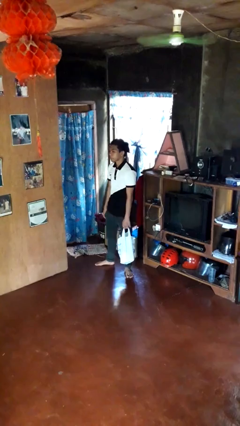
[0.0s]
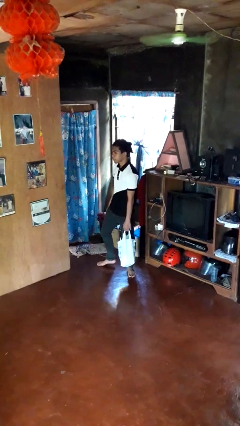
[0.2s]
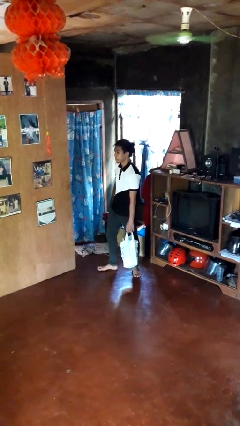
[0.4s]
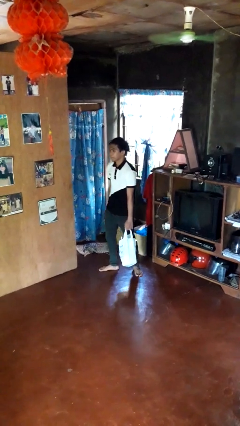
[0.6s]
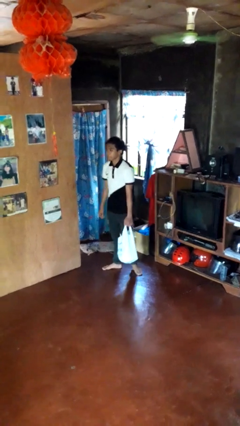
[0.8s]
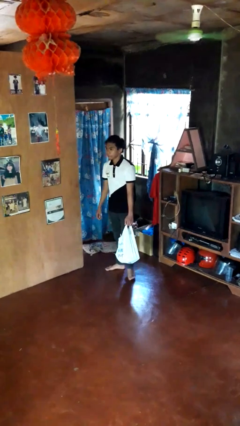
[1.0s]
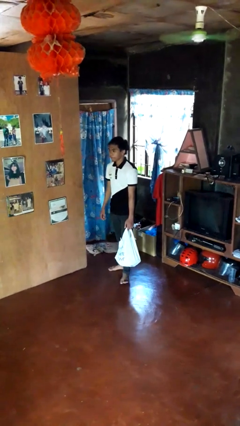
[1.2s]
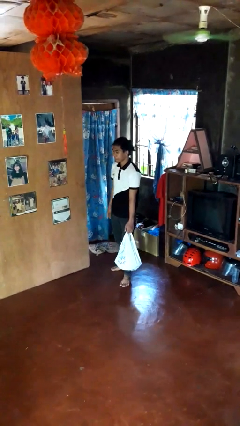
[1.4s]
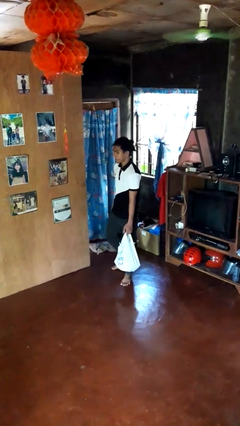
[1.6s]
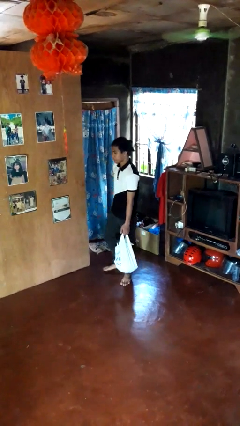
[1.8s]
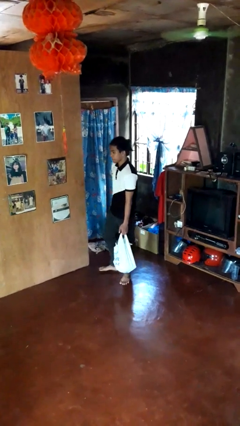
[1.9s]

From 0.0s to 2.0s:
person carries groceries

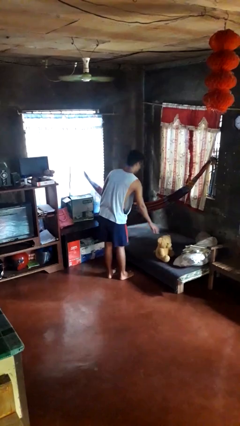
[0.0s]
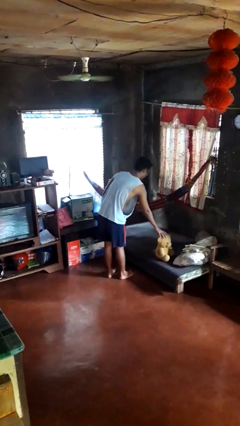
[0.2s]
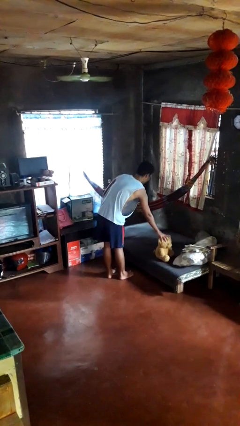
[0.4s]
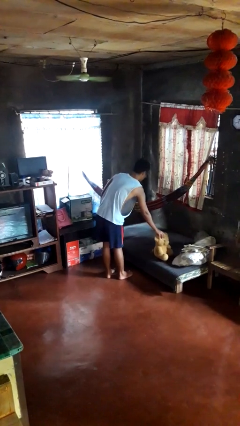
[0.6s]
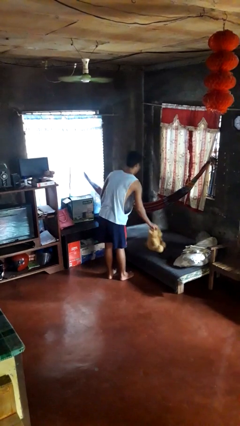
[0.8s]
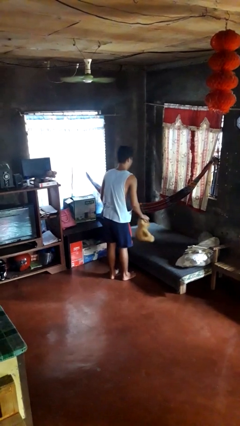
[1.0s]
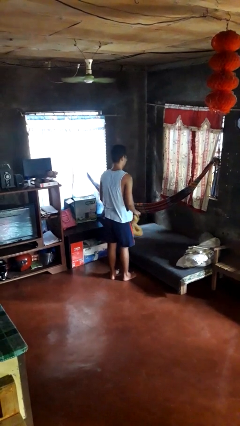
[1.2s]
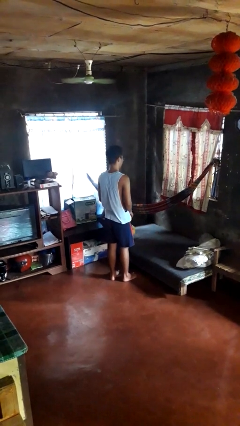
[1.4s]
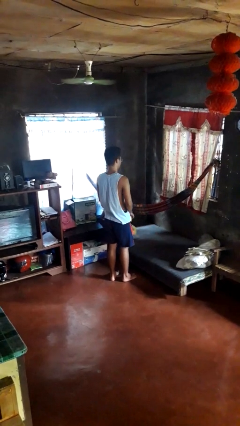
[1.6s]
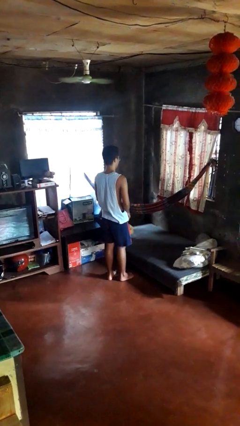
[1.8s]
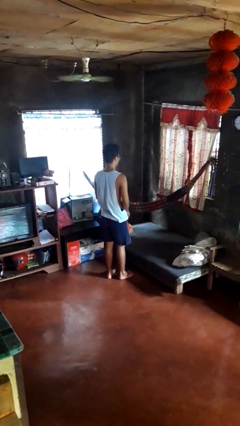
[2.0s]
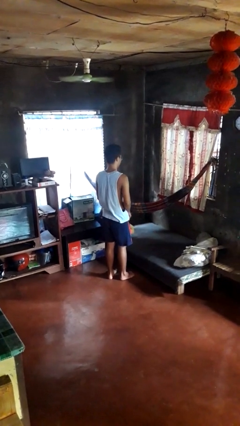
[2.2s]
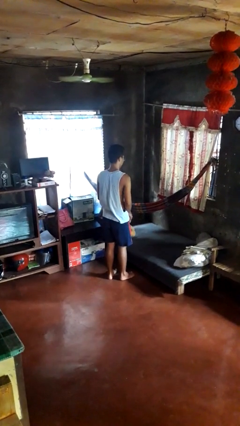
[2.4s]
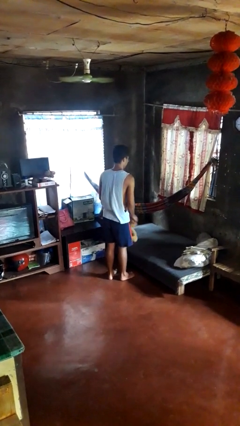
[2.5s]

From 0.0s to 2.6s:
person picks up object from bed

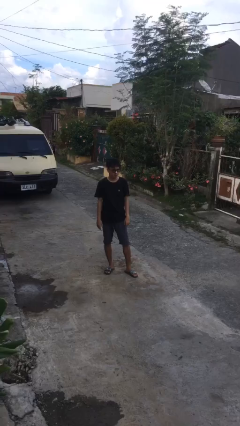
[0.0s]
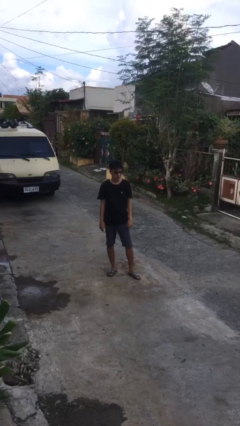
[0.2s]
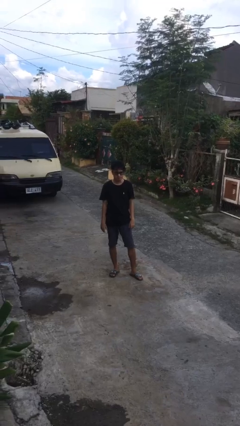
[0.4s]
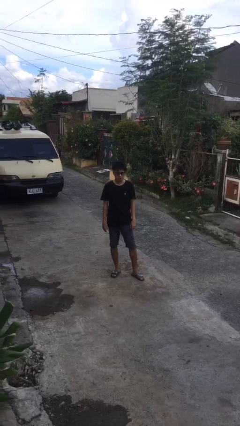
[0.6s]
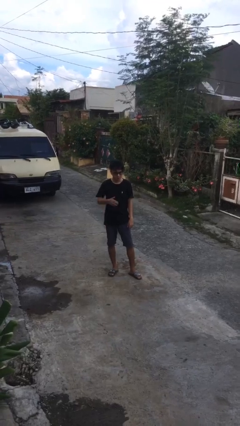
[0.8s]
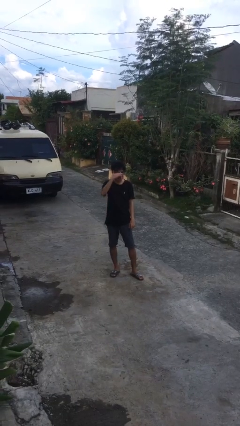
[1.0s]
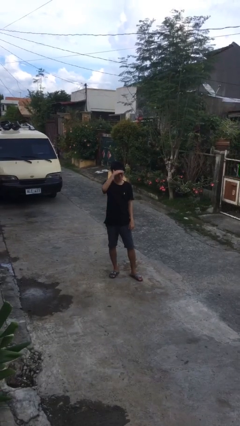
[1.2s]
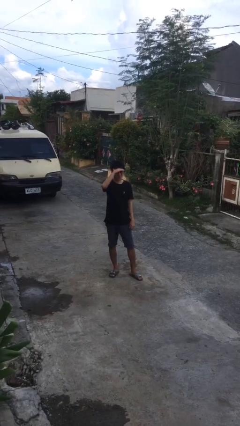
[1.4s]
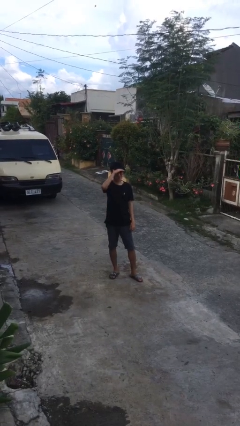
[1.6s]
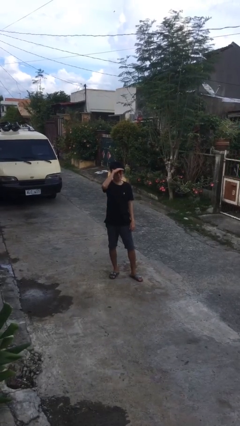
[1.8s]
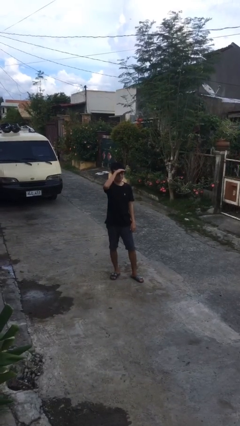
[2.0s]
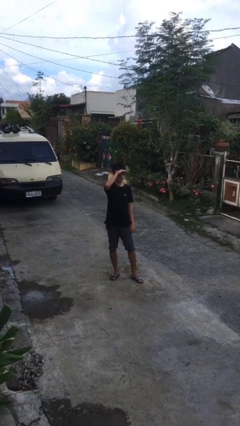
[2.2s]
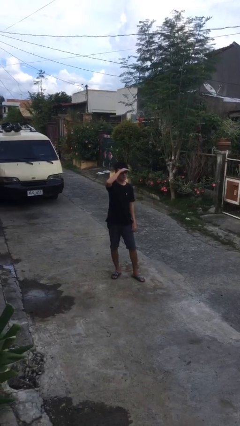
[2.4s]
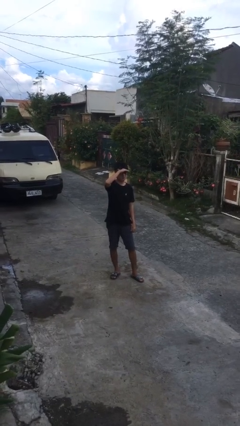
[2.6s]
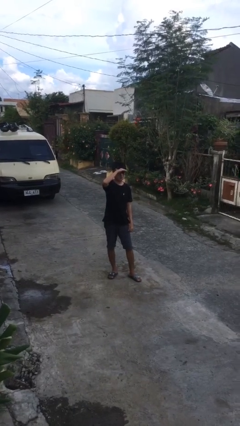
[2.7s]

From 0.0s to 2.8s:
person shades eyes

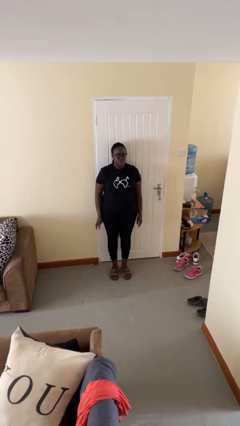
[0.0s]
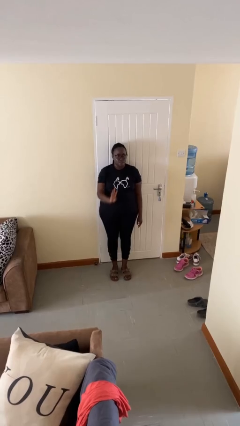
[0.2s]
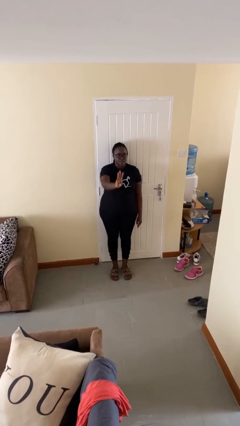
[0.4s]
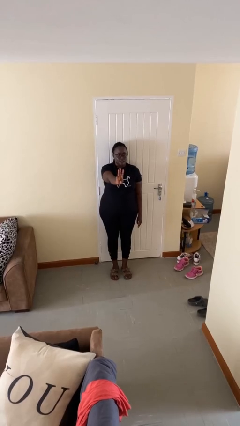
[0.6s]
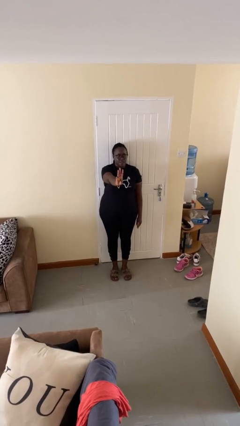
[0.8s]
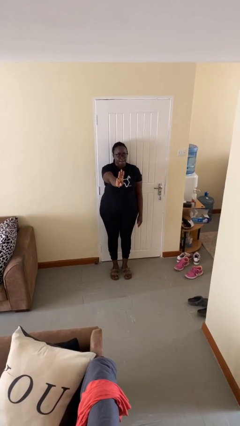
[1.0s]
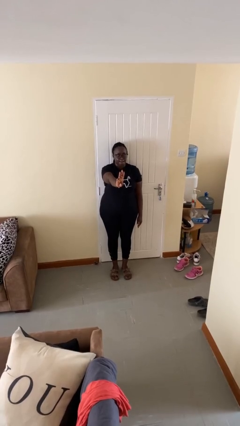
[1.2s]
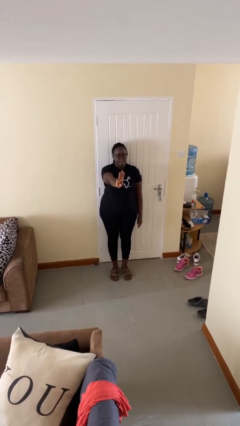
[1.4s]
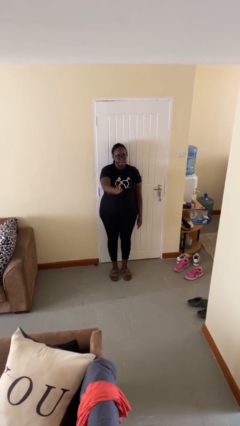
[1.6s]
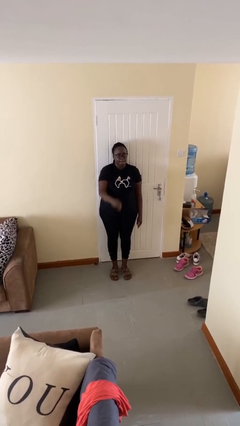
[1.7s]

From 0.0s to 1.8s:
person gestures number three

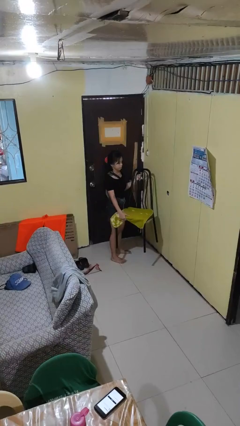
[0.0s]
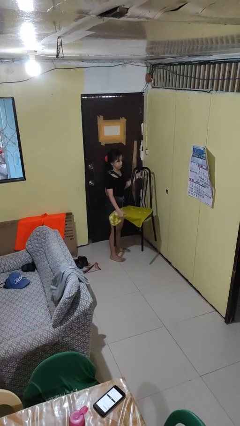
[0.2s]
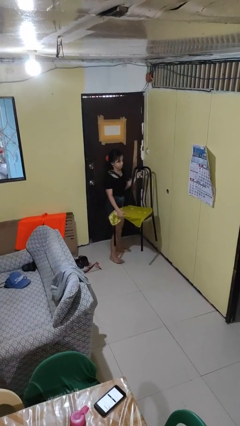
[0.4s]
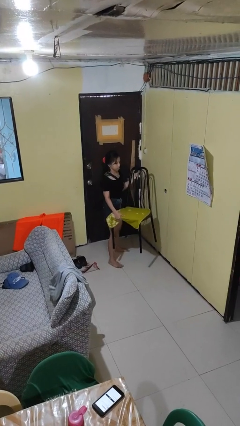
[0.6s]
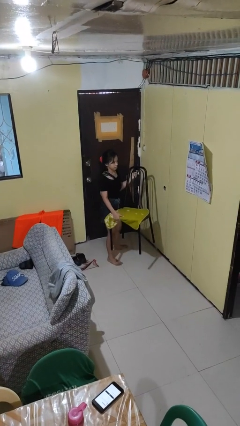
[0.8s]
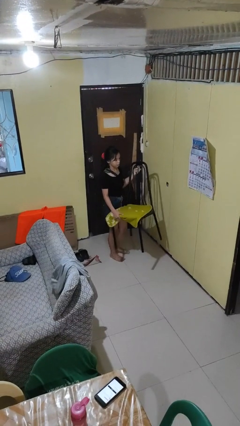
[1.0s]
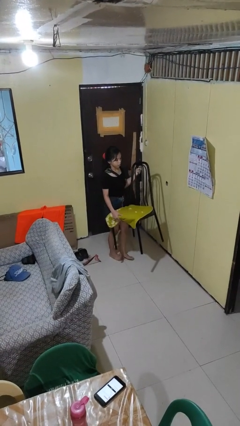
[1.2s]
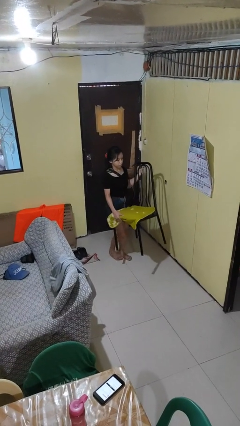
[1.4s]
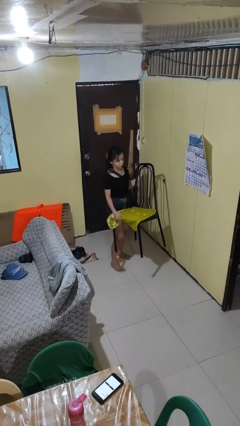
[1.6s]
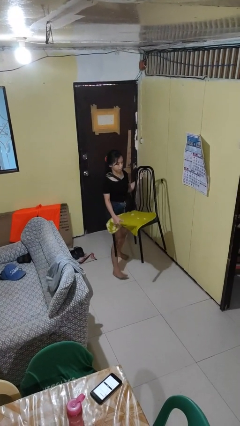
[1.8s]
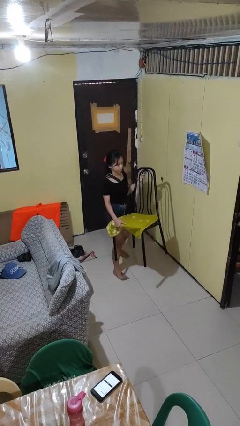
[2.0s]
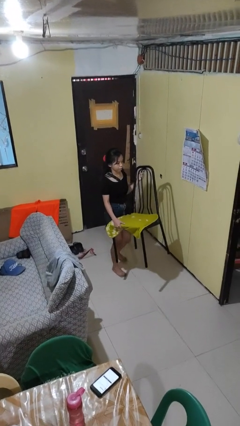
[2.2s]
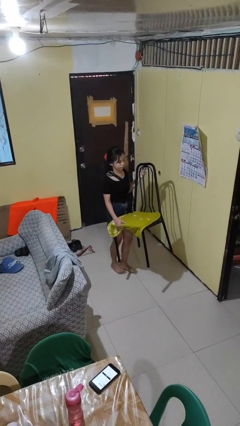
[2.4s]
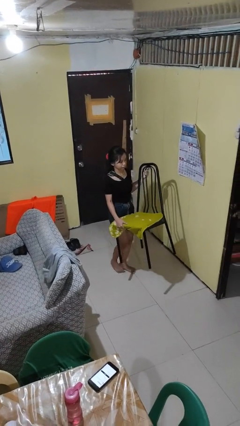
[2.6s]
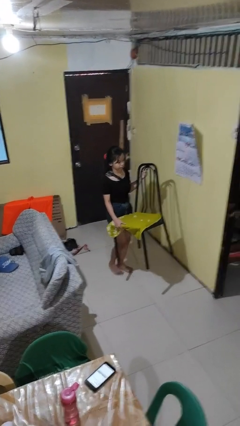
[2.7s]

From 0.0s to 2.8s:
person carries furniture

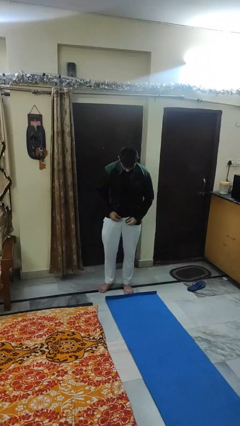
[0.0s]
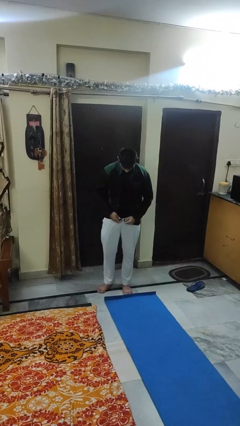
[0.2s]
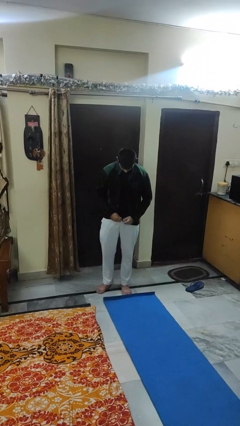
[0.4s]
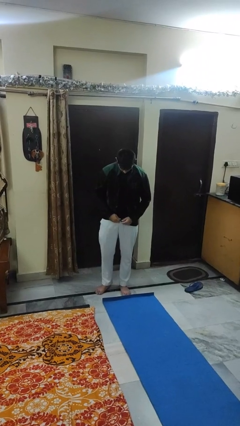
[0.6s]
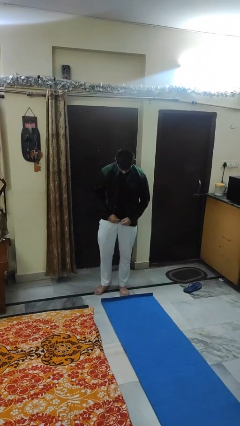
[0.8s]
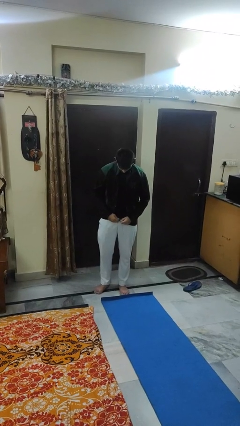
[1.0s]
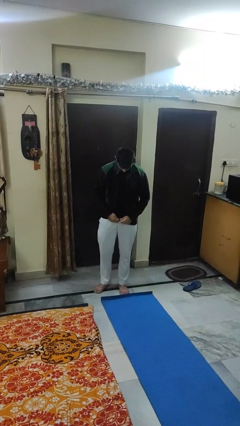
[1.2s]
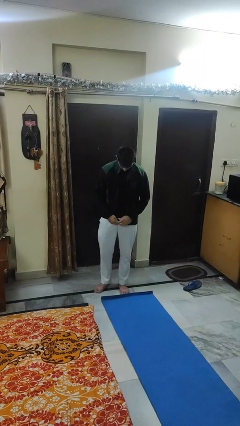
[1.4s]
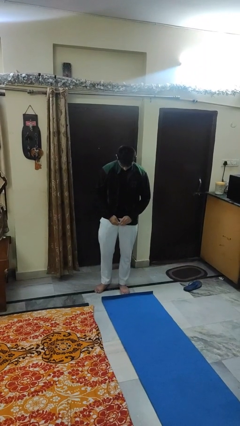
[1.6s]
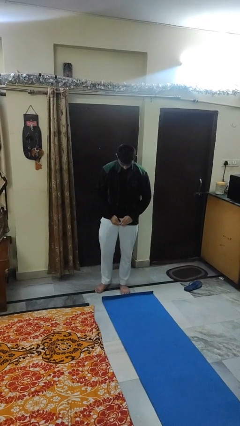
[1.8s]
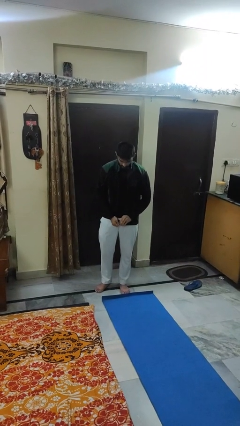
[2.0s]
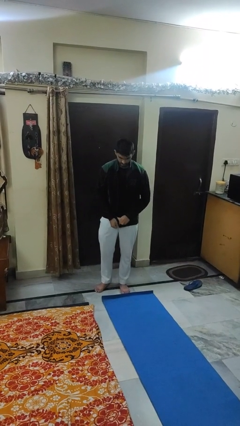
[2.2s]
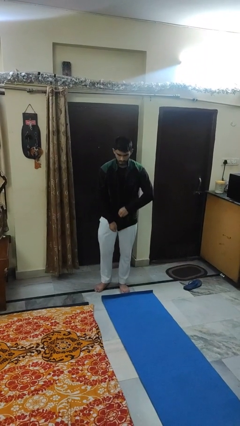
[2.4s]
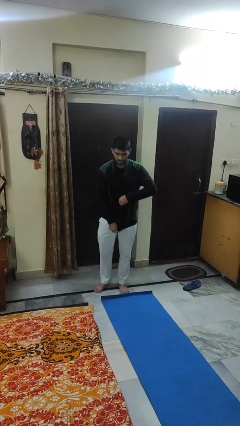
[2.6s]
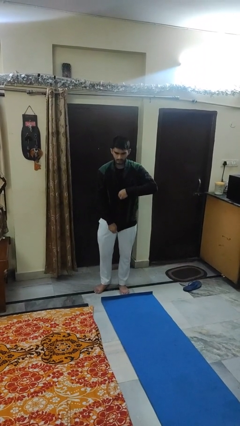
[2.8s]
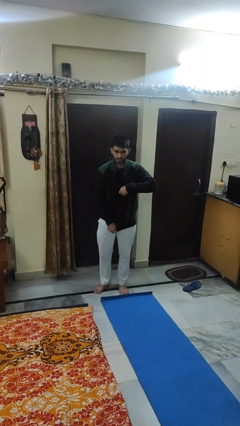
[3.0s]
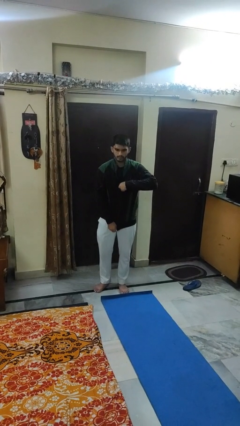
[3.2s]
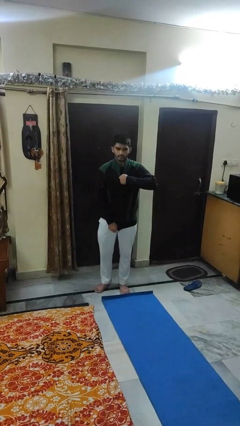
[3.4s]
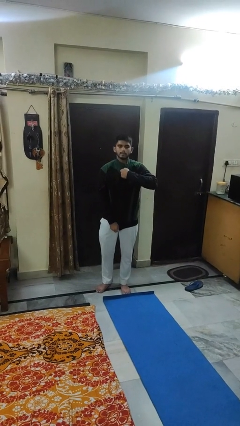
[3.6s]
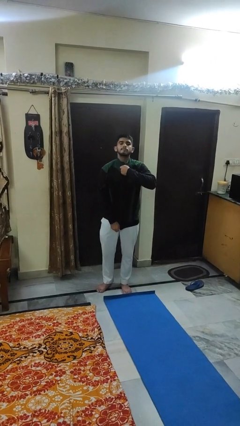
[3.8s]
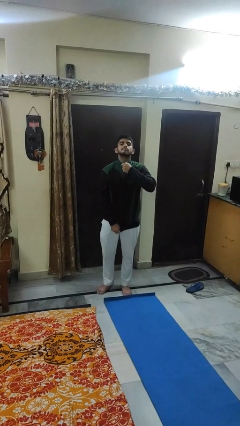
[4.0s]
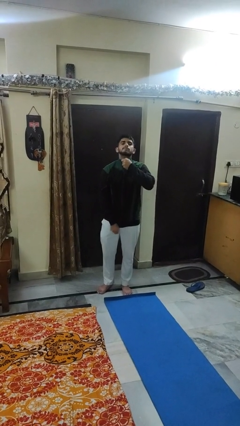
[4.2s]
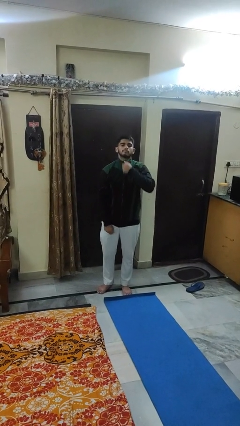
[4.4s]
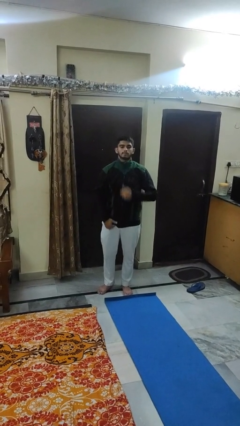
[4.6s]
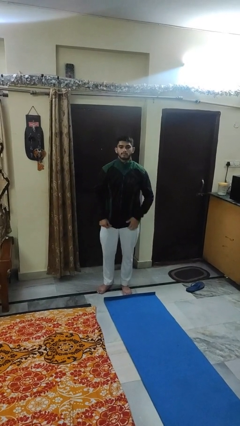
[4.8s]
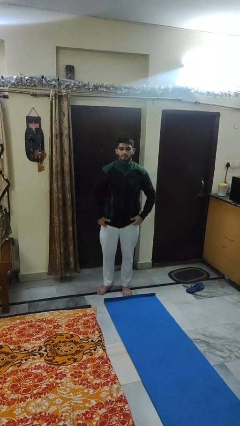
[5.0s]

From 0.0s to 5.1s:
person zips up jacket

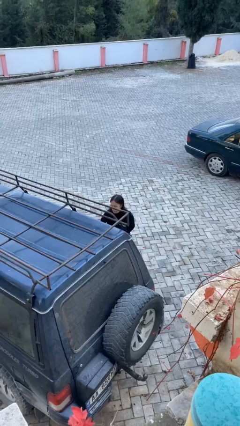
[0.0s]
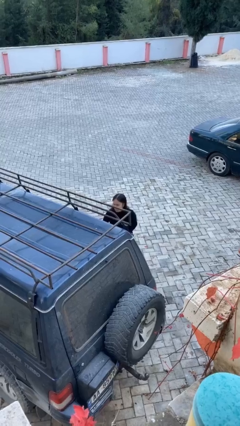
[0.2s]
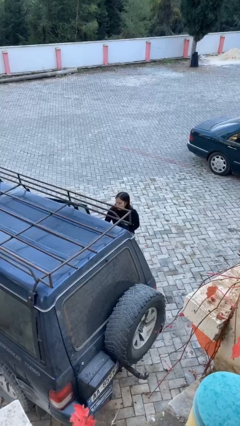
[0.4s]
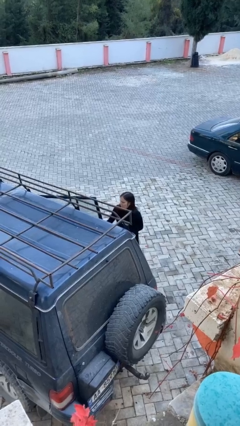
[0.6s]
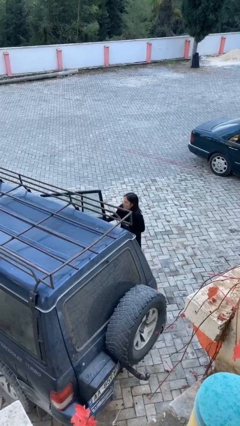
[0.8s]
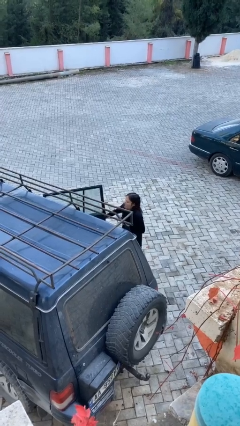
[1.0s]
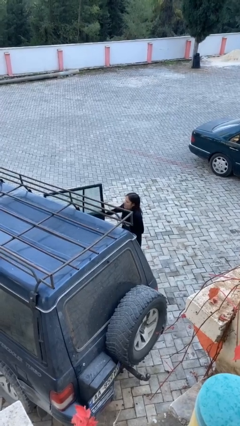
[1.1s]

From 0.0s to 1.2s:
person opens car door
